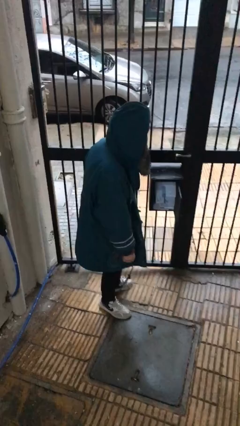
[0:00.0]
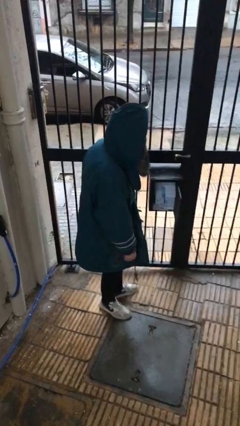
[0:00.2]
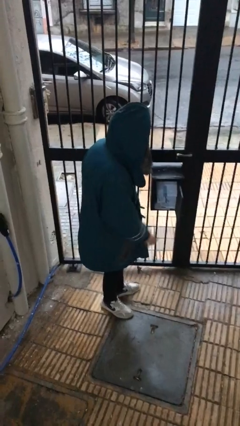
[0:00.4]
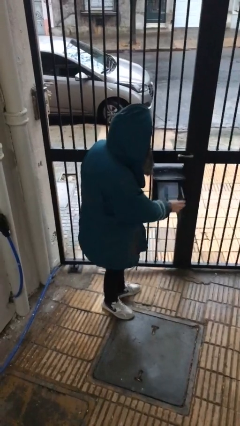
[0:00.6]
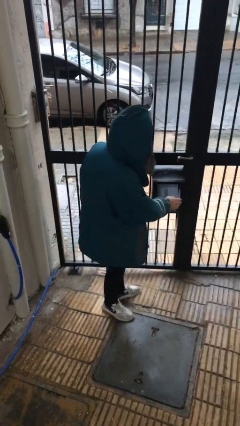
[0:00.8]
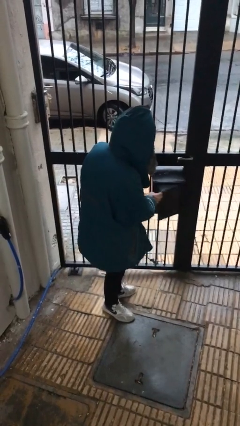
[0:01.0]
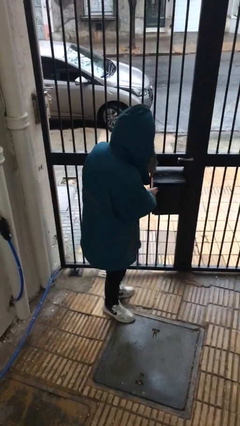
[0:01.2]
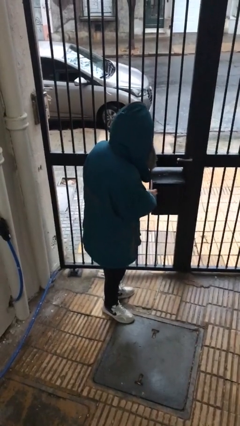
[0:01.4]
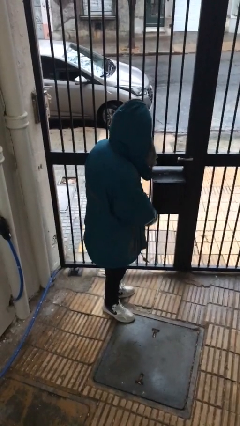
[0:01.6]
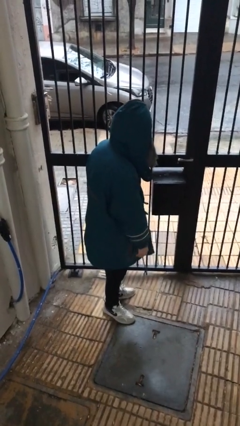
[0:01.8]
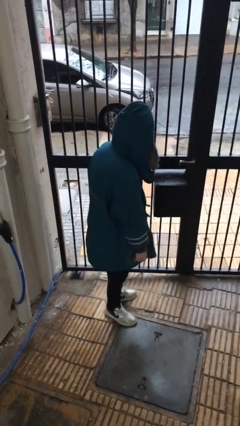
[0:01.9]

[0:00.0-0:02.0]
person closes mailbox

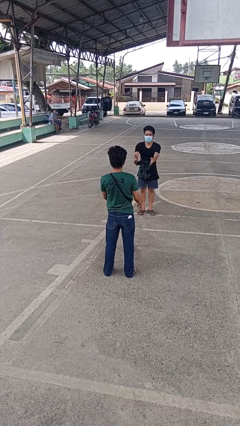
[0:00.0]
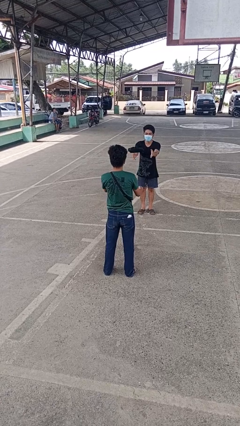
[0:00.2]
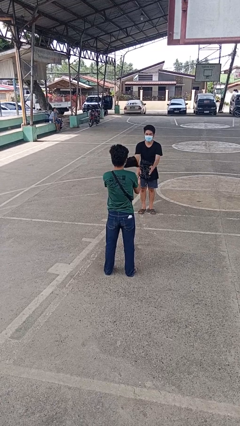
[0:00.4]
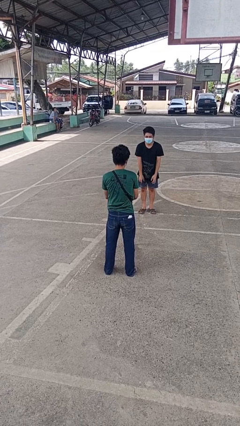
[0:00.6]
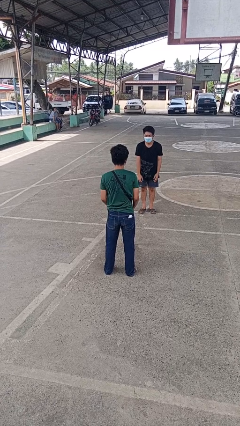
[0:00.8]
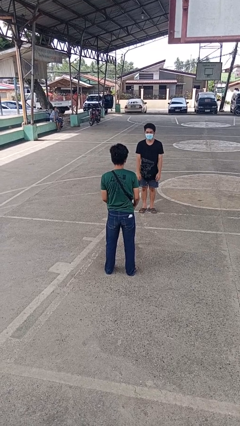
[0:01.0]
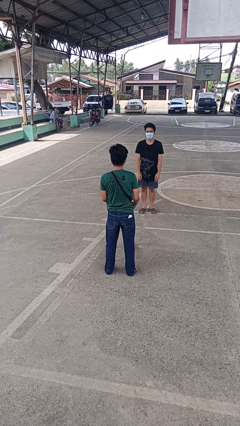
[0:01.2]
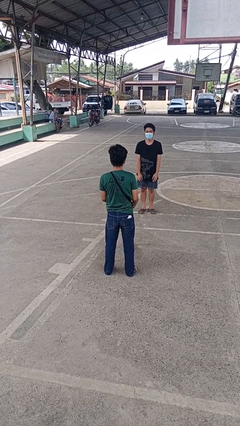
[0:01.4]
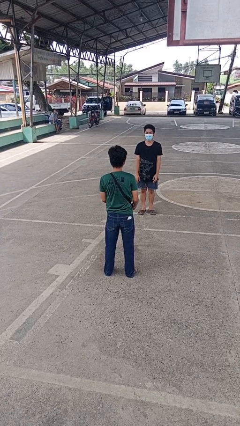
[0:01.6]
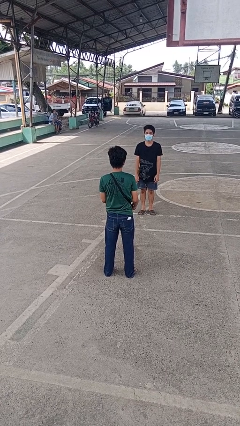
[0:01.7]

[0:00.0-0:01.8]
person catches object from person

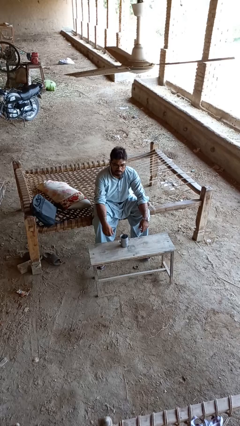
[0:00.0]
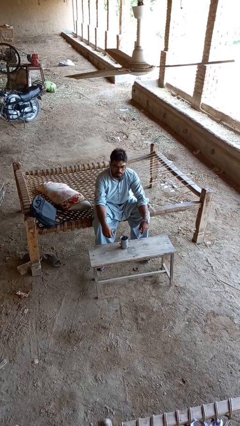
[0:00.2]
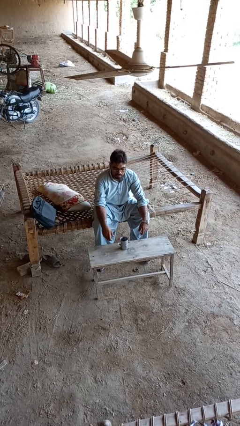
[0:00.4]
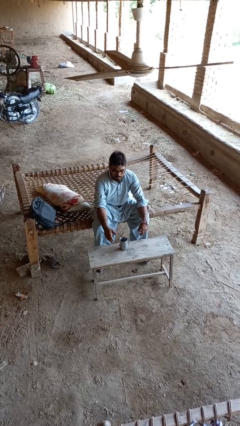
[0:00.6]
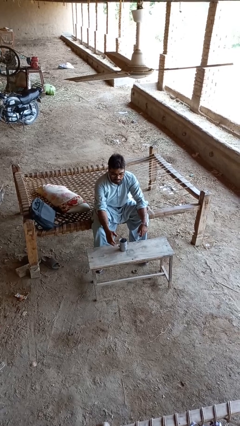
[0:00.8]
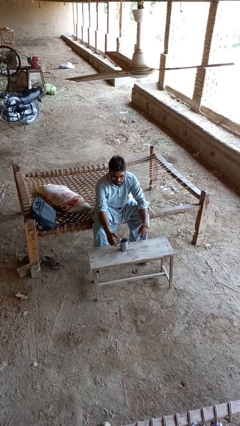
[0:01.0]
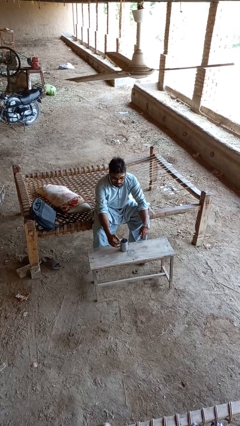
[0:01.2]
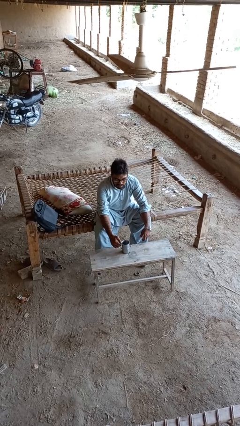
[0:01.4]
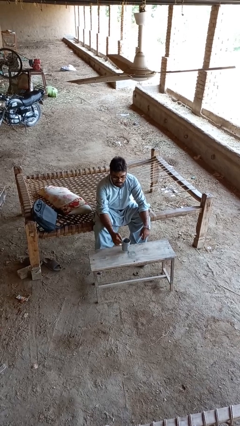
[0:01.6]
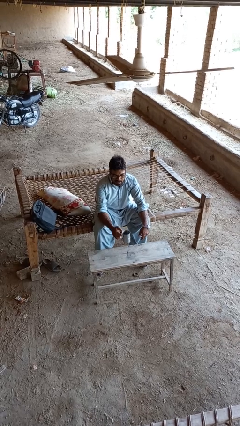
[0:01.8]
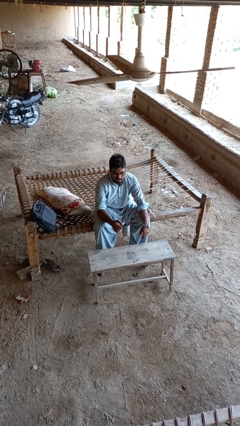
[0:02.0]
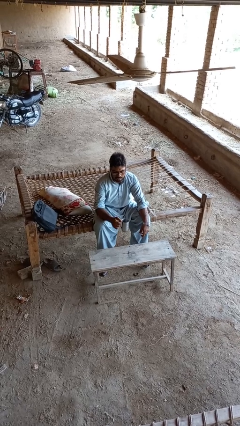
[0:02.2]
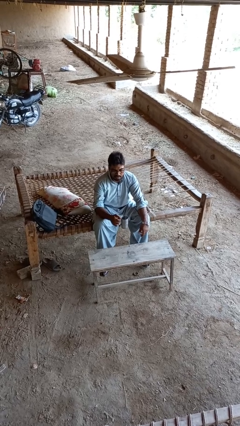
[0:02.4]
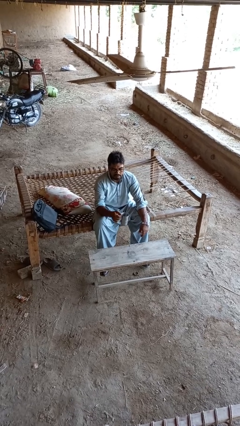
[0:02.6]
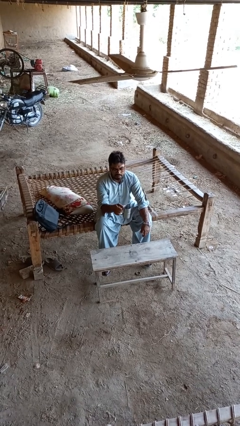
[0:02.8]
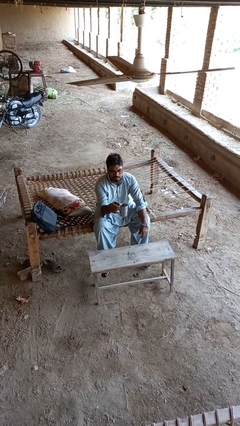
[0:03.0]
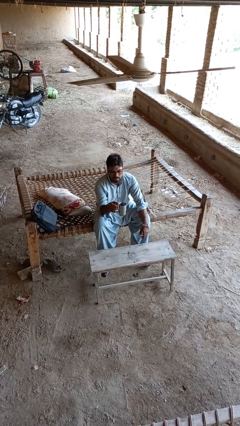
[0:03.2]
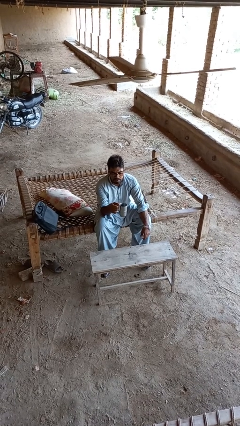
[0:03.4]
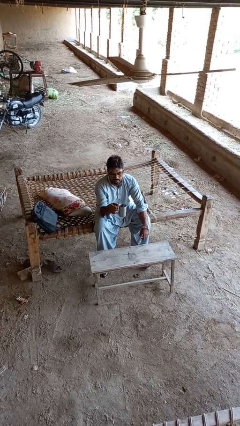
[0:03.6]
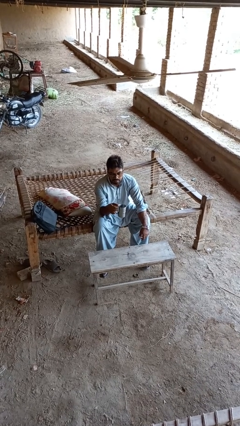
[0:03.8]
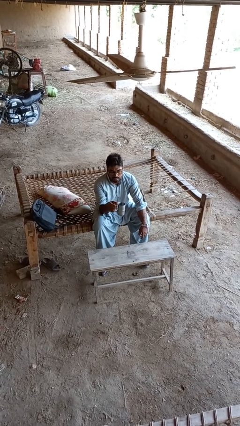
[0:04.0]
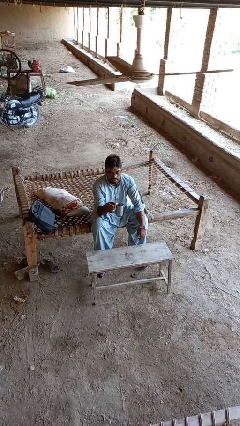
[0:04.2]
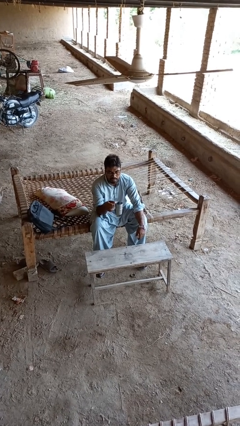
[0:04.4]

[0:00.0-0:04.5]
person picks up object from table

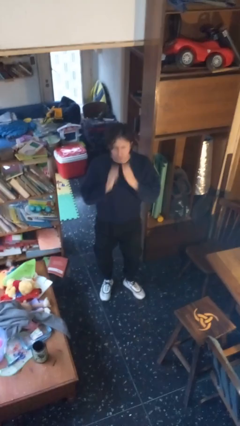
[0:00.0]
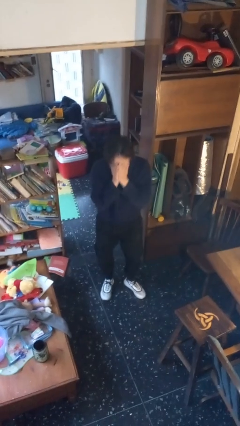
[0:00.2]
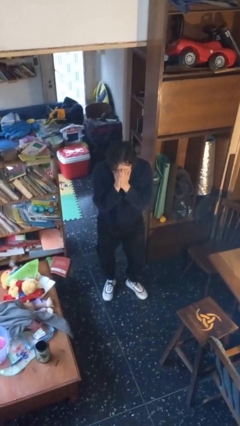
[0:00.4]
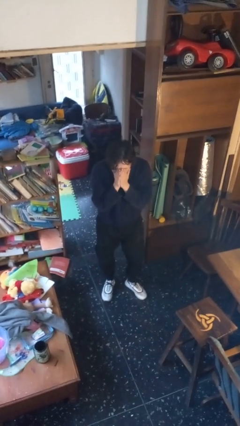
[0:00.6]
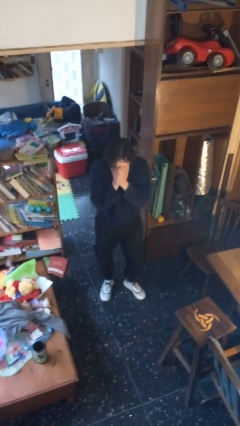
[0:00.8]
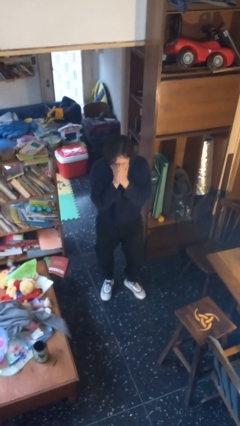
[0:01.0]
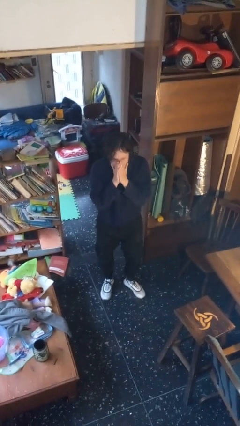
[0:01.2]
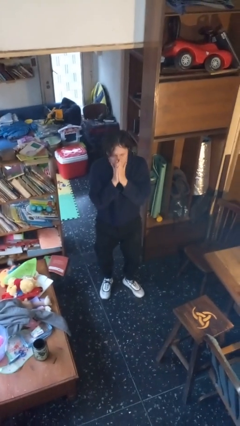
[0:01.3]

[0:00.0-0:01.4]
person sneezes into hand

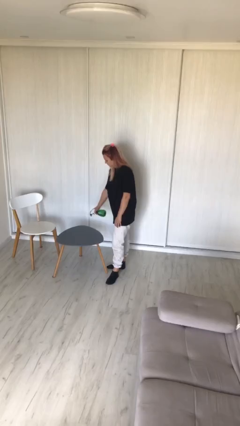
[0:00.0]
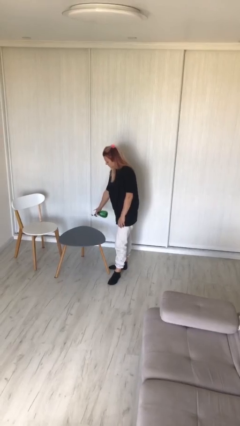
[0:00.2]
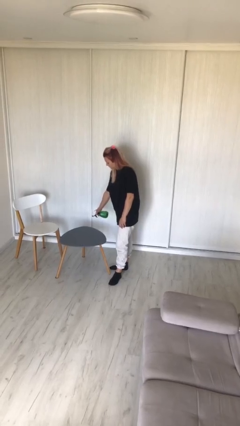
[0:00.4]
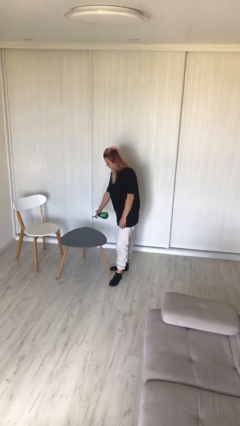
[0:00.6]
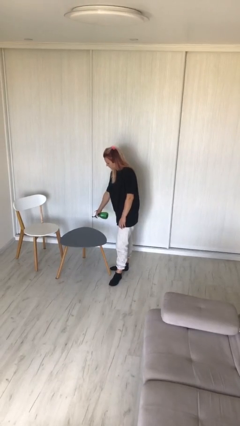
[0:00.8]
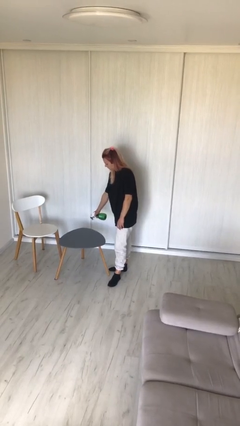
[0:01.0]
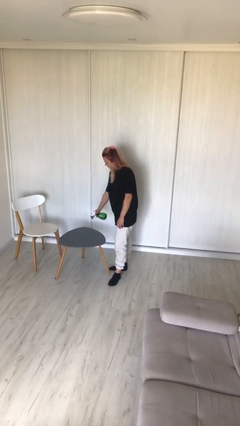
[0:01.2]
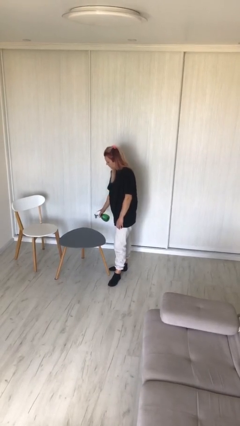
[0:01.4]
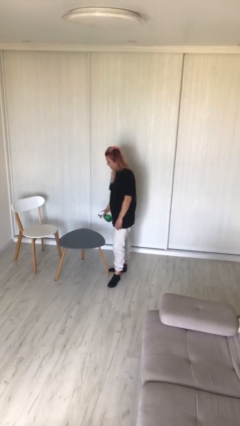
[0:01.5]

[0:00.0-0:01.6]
person sprays from bottle

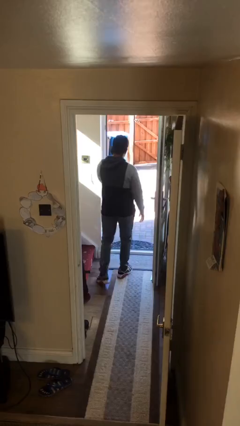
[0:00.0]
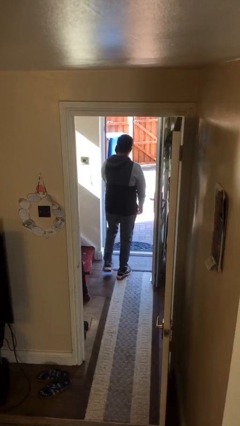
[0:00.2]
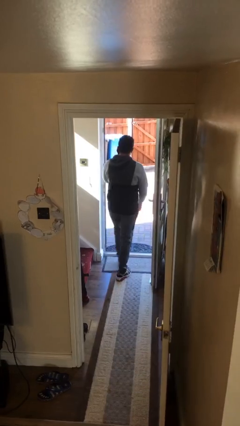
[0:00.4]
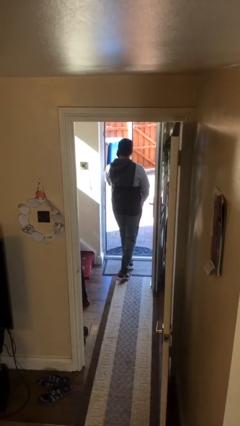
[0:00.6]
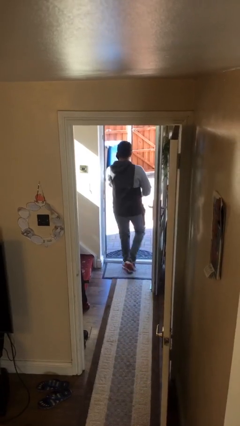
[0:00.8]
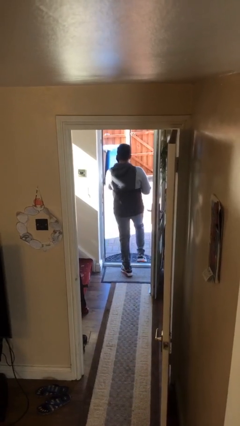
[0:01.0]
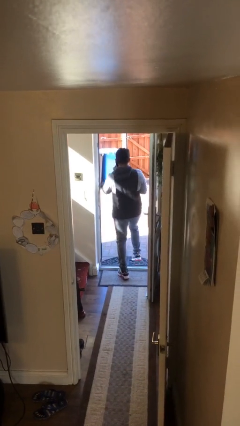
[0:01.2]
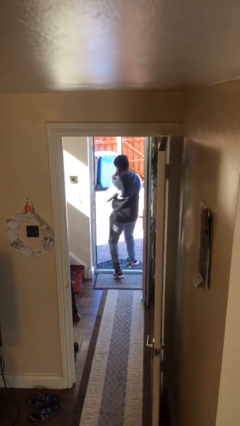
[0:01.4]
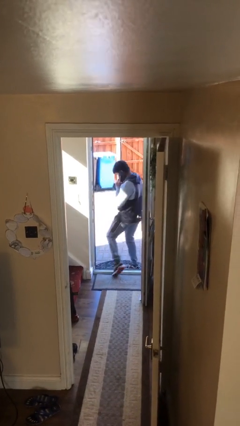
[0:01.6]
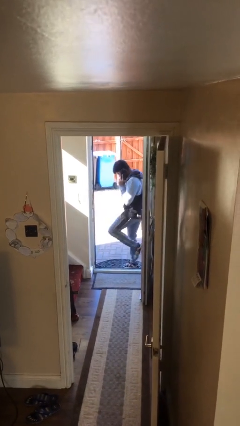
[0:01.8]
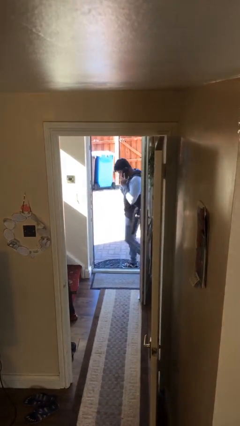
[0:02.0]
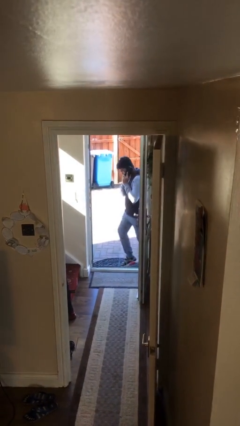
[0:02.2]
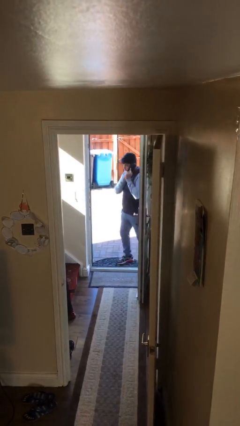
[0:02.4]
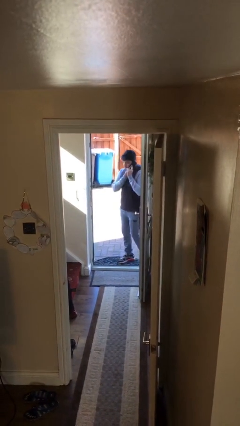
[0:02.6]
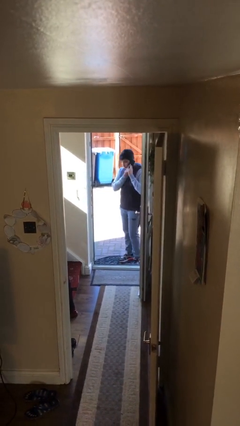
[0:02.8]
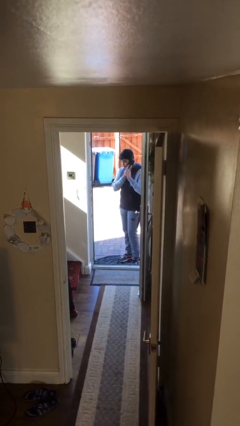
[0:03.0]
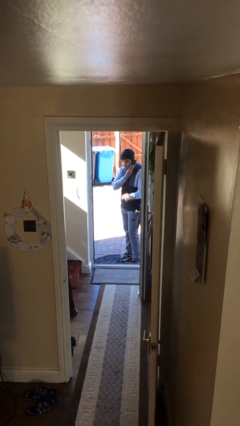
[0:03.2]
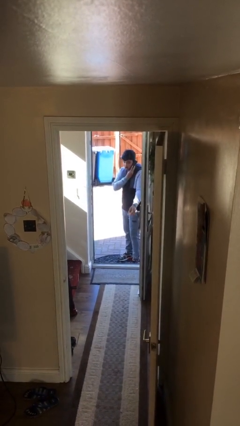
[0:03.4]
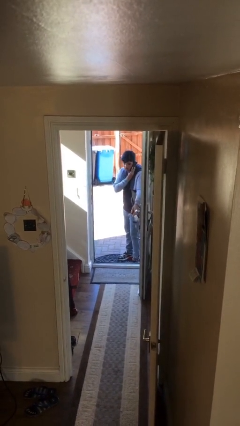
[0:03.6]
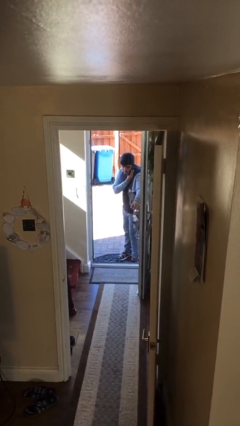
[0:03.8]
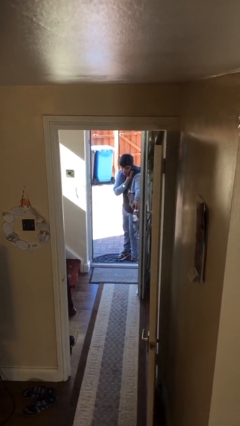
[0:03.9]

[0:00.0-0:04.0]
person exits scene through structure

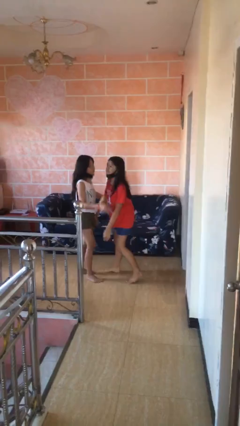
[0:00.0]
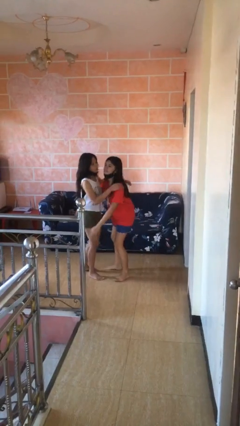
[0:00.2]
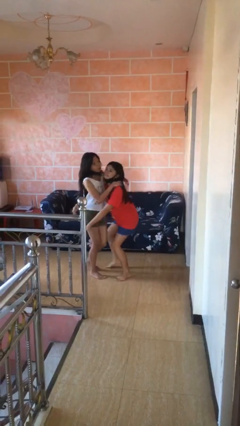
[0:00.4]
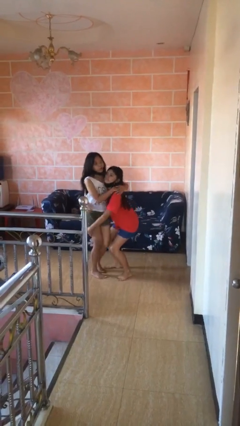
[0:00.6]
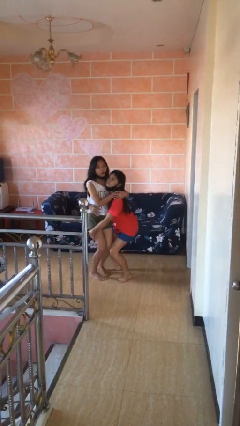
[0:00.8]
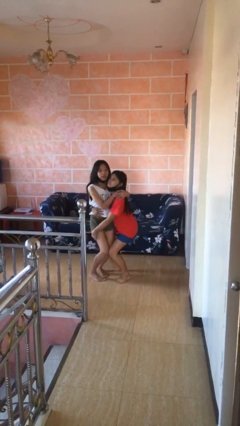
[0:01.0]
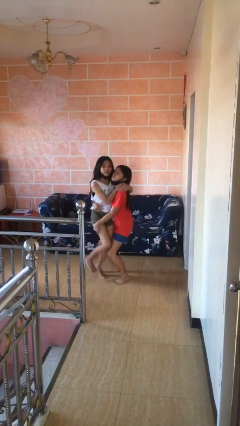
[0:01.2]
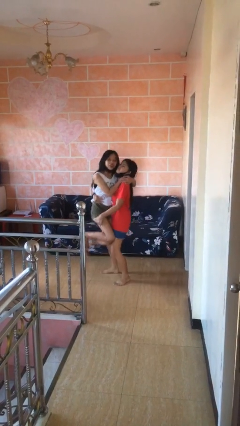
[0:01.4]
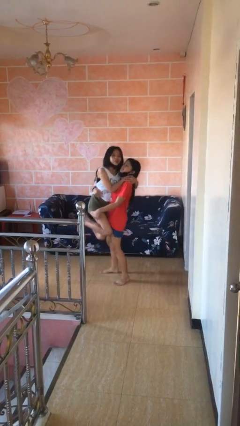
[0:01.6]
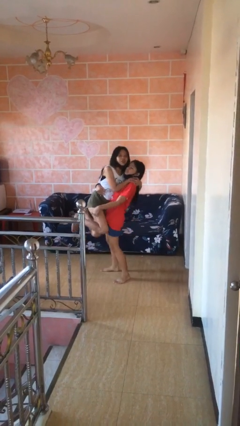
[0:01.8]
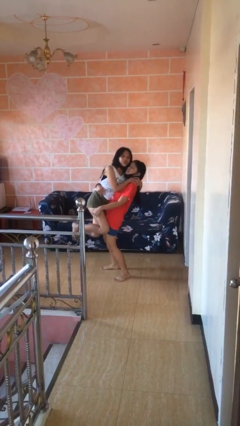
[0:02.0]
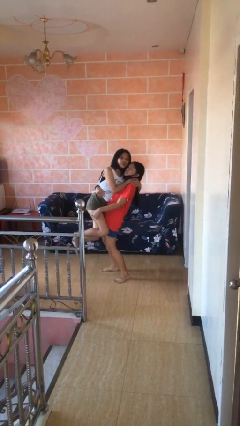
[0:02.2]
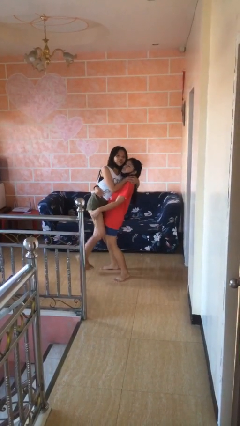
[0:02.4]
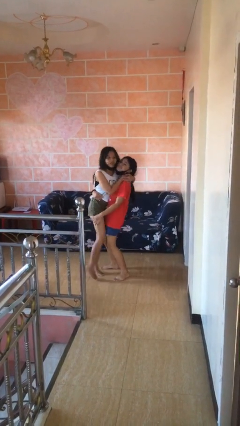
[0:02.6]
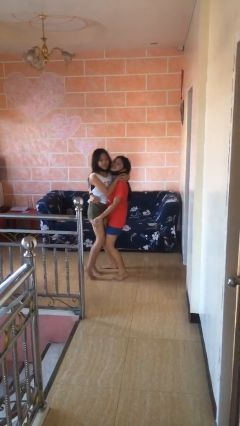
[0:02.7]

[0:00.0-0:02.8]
person picks up person
